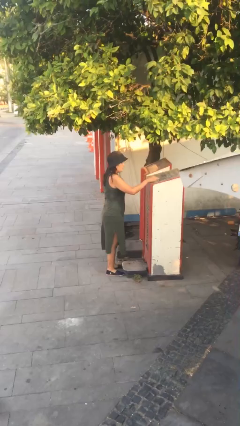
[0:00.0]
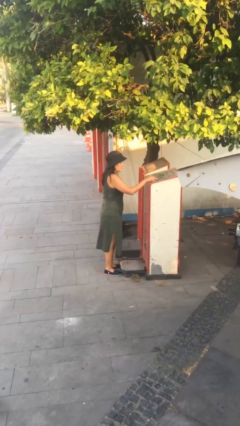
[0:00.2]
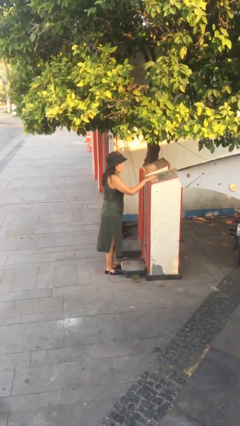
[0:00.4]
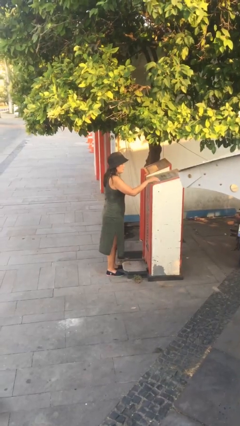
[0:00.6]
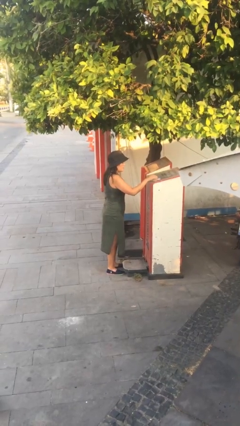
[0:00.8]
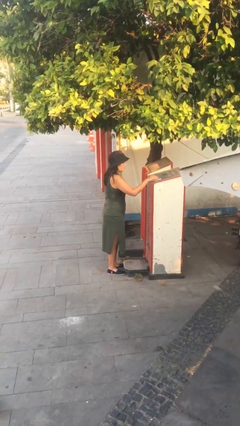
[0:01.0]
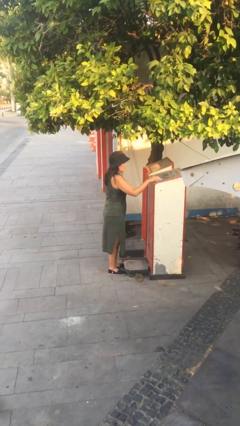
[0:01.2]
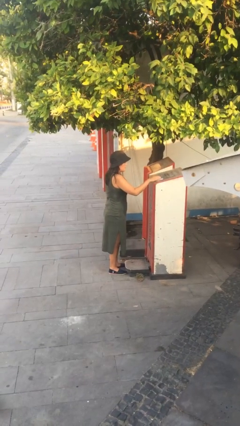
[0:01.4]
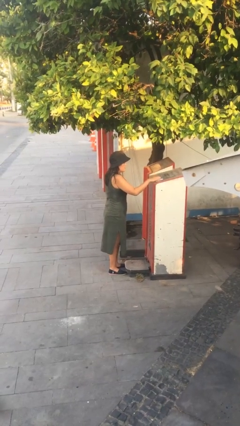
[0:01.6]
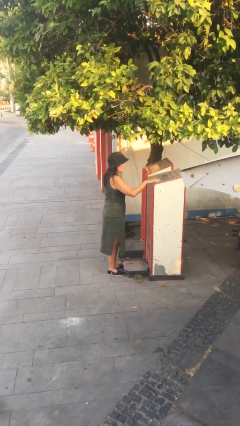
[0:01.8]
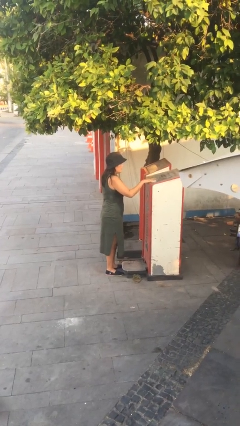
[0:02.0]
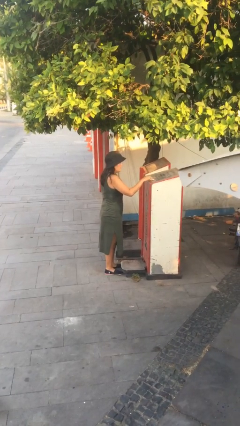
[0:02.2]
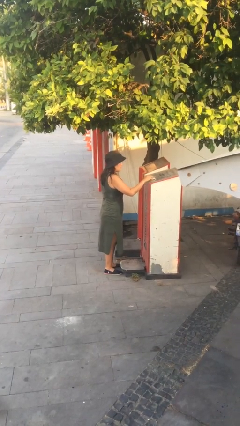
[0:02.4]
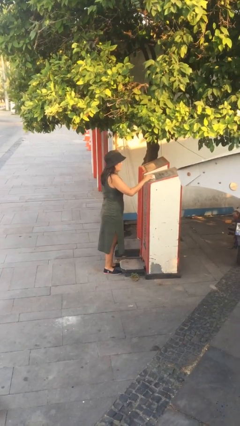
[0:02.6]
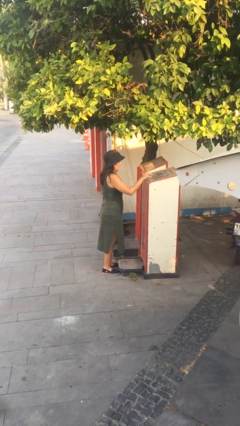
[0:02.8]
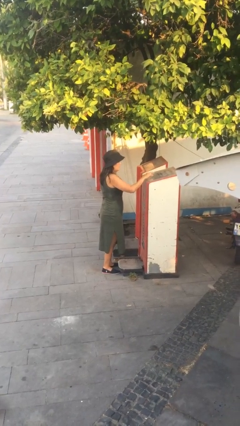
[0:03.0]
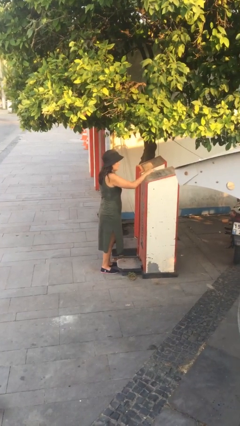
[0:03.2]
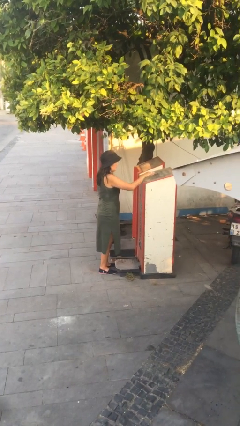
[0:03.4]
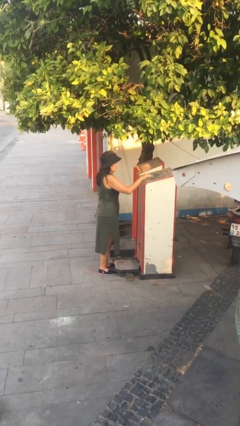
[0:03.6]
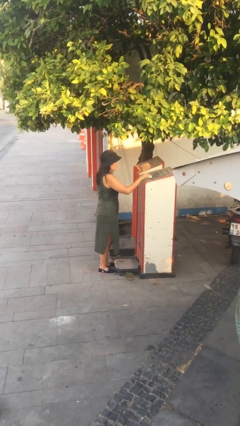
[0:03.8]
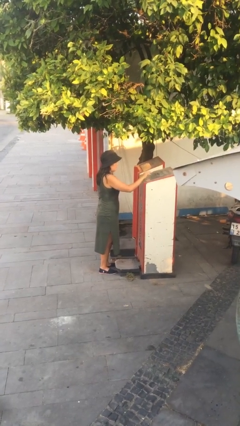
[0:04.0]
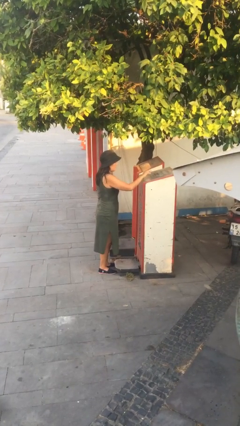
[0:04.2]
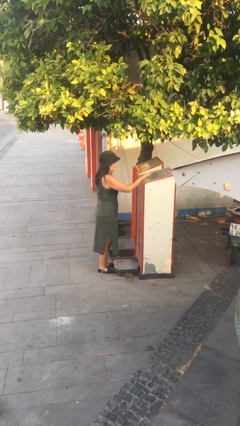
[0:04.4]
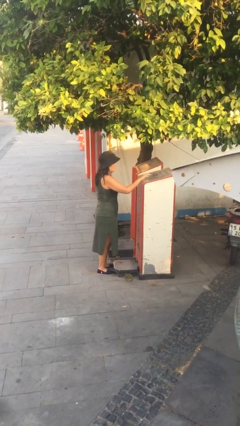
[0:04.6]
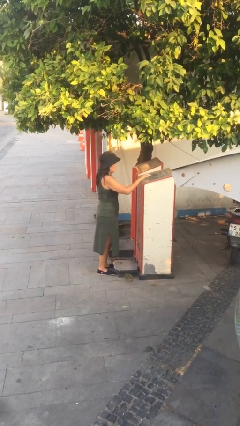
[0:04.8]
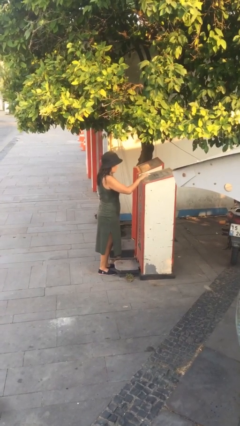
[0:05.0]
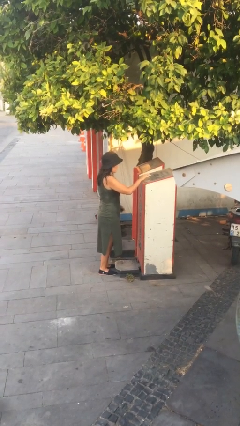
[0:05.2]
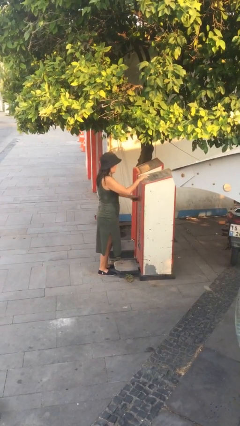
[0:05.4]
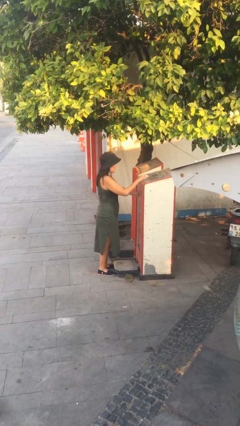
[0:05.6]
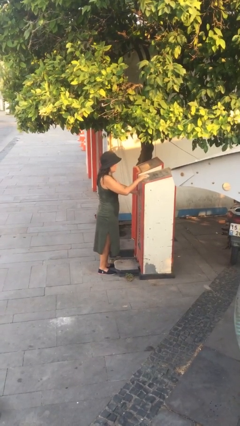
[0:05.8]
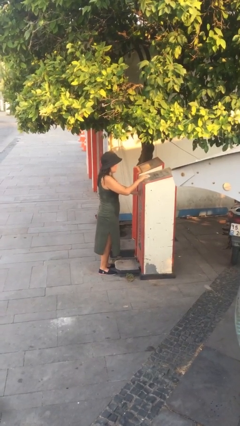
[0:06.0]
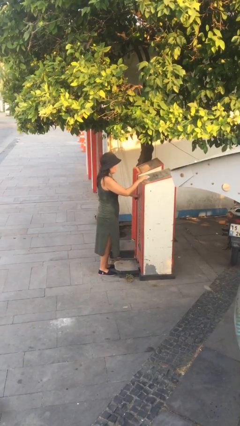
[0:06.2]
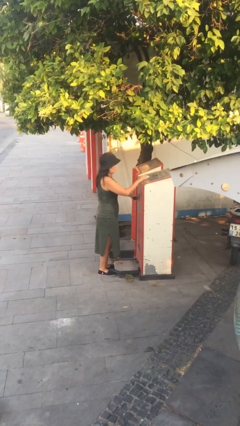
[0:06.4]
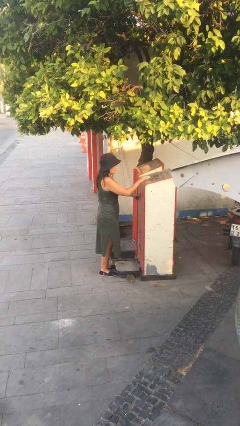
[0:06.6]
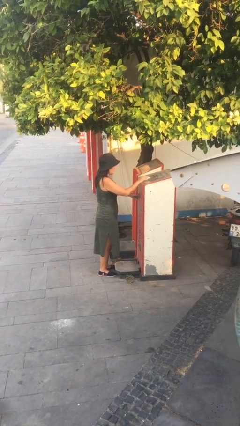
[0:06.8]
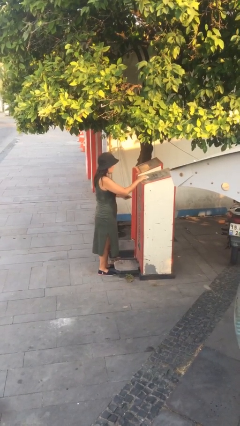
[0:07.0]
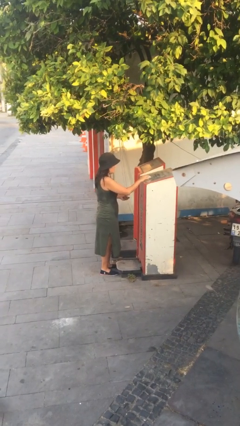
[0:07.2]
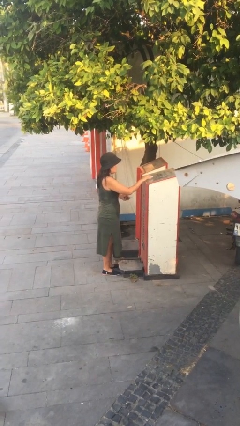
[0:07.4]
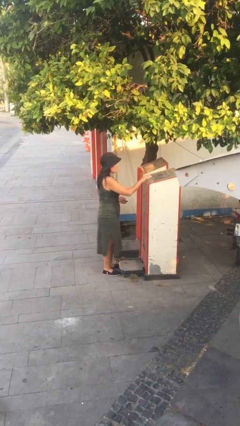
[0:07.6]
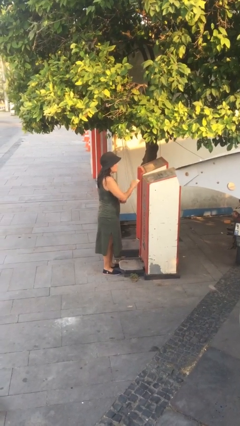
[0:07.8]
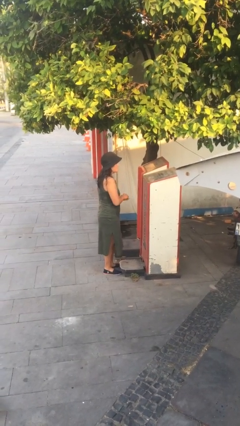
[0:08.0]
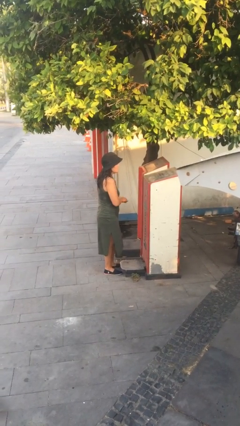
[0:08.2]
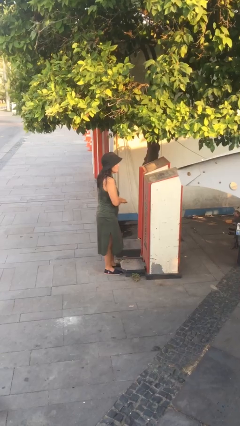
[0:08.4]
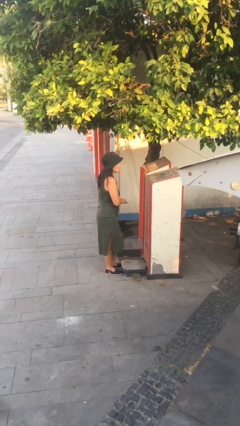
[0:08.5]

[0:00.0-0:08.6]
person purchases from machine

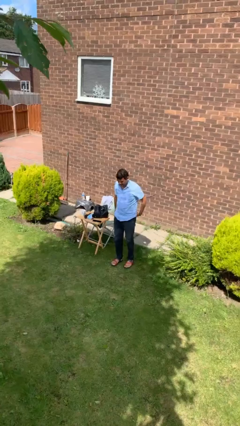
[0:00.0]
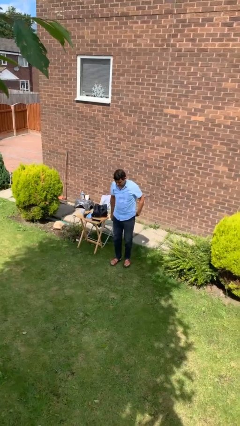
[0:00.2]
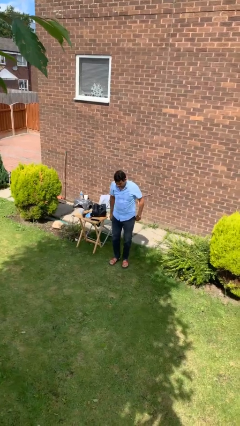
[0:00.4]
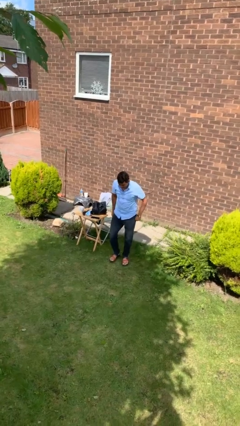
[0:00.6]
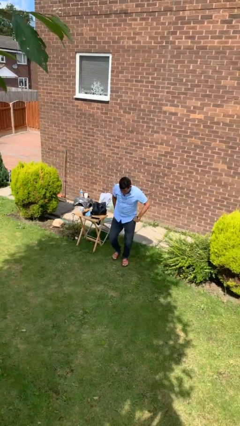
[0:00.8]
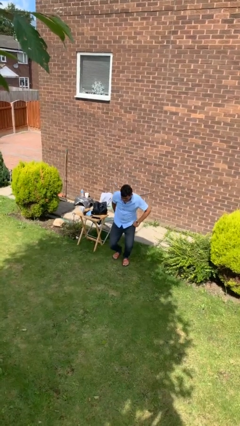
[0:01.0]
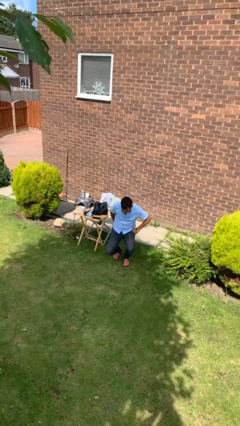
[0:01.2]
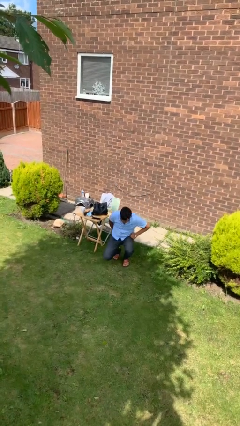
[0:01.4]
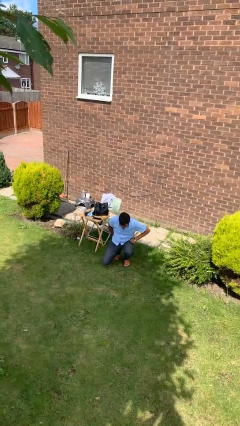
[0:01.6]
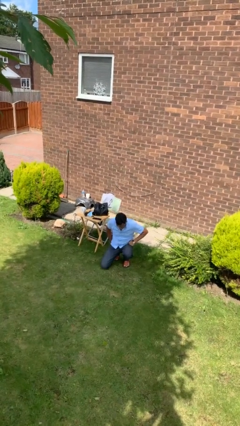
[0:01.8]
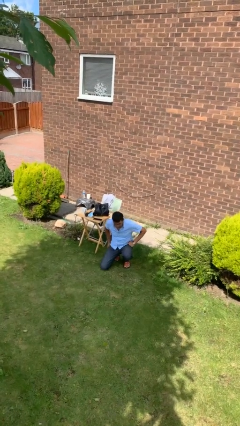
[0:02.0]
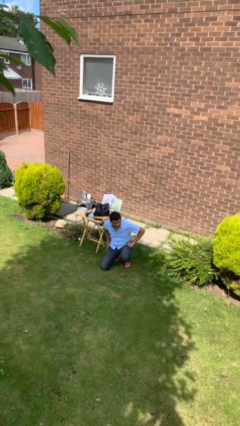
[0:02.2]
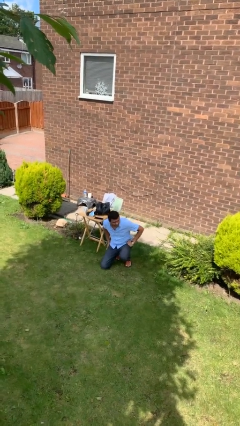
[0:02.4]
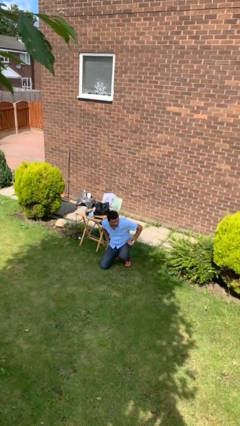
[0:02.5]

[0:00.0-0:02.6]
person kneels

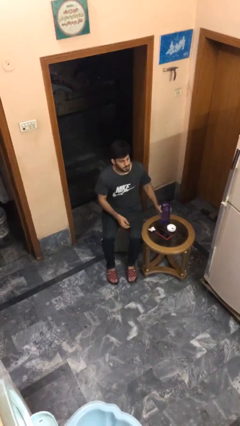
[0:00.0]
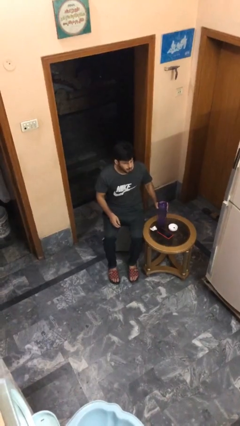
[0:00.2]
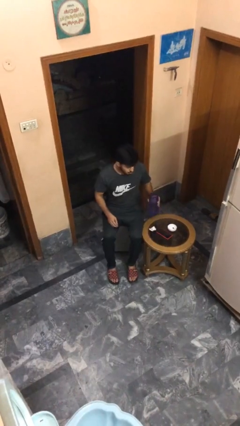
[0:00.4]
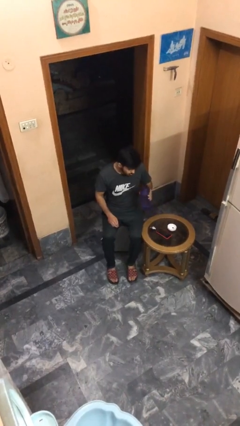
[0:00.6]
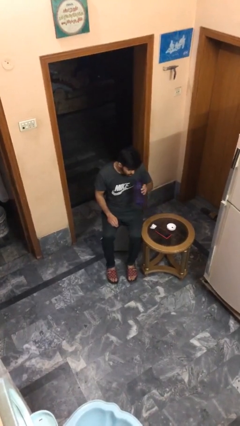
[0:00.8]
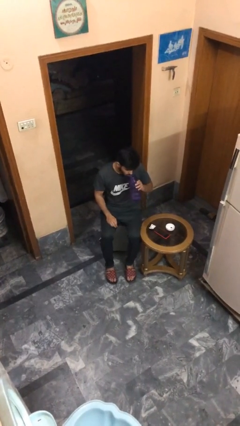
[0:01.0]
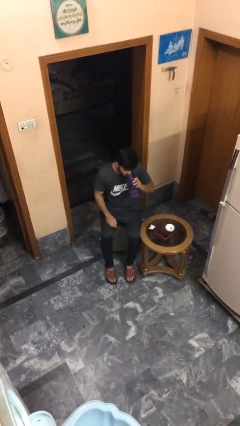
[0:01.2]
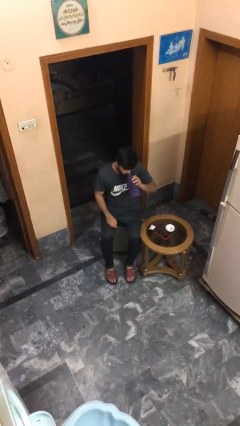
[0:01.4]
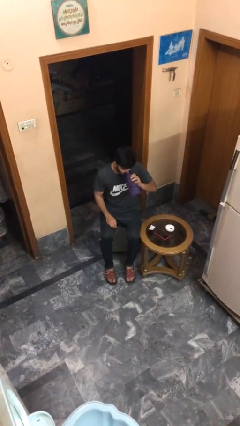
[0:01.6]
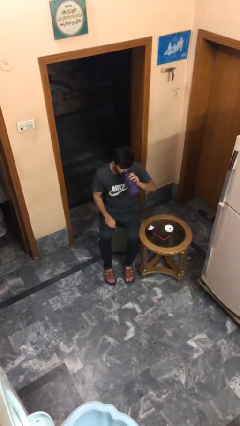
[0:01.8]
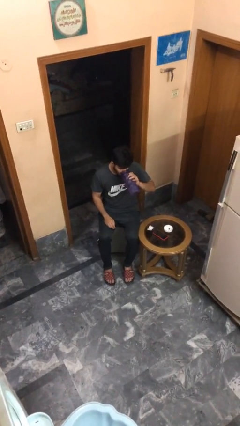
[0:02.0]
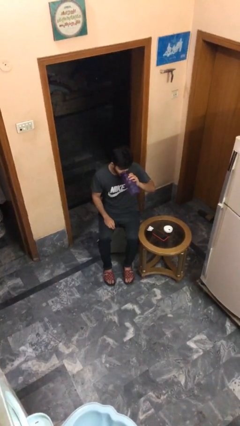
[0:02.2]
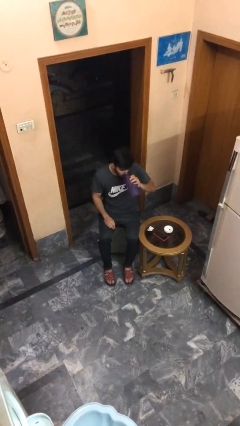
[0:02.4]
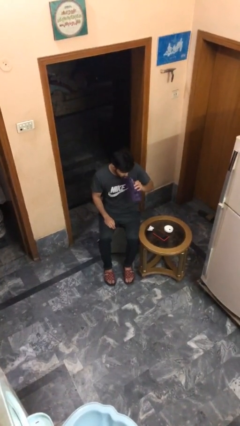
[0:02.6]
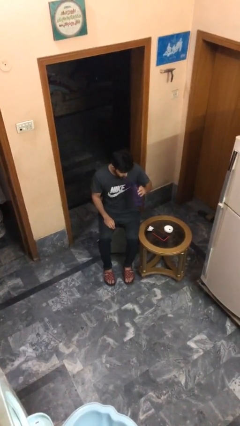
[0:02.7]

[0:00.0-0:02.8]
person drinks from cup

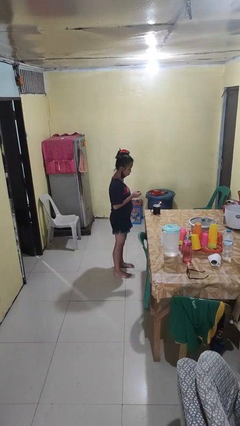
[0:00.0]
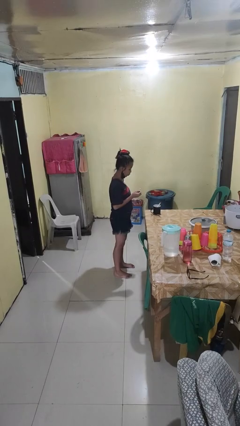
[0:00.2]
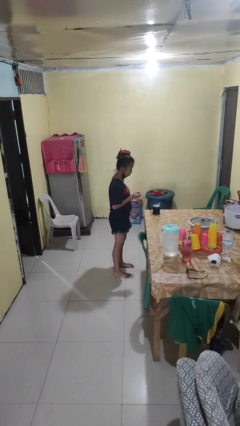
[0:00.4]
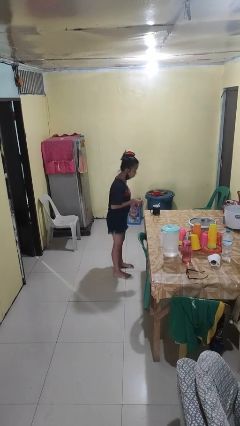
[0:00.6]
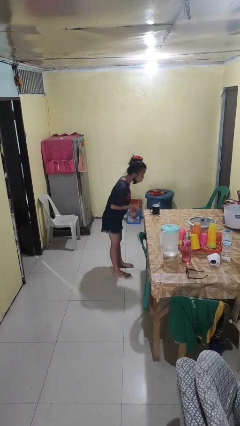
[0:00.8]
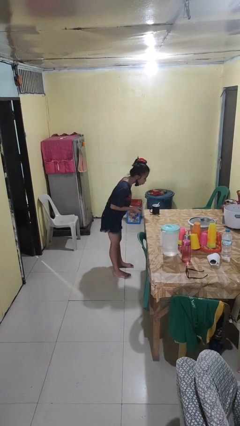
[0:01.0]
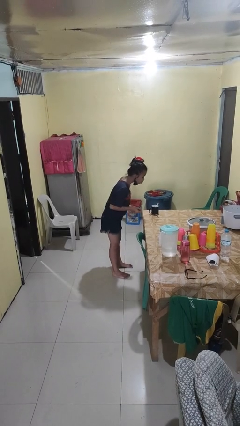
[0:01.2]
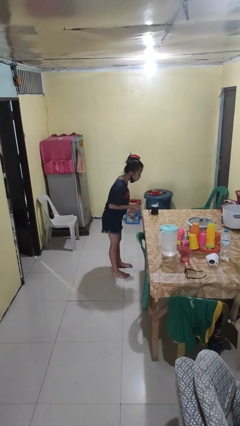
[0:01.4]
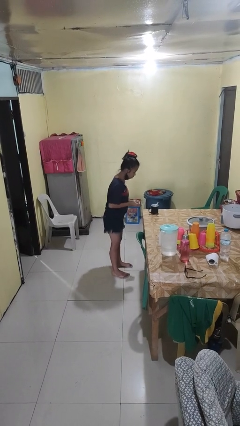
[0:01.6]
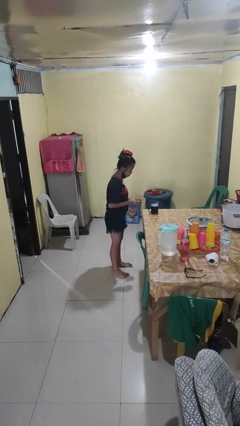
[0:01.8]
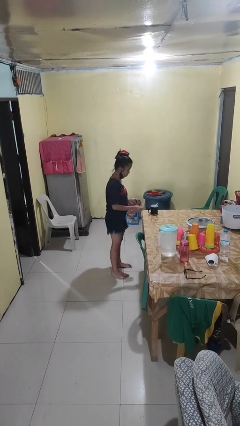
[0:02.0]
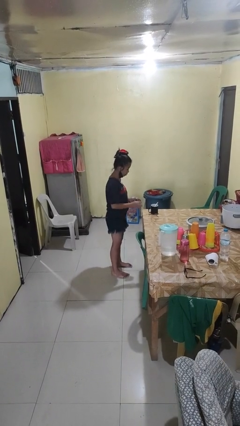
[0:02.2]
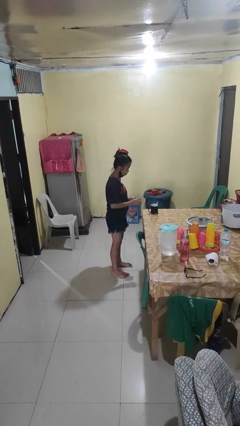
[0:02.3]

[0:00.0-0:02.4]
person extinguishes candle

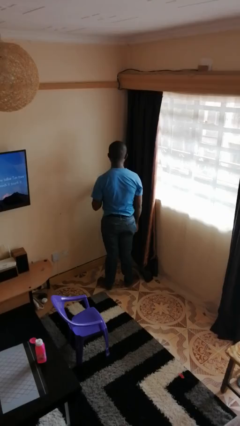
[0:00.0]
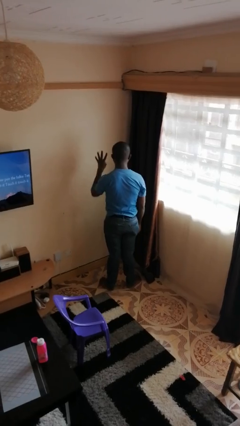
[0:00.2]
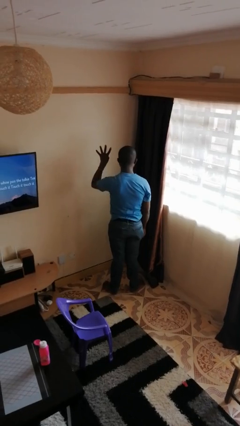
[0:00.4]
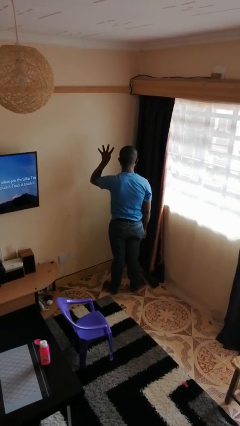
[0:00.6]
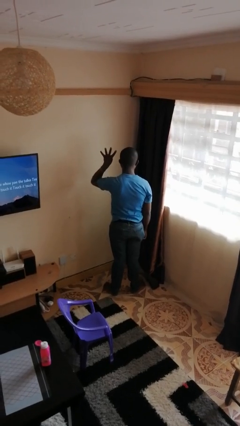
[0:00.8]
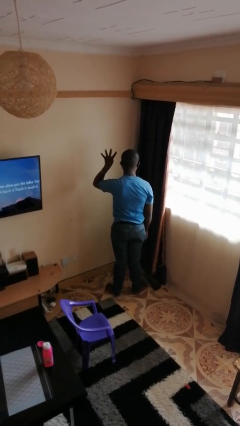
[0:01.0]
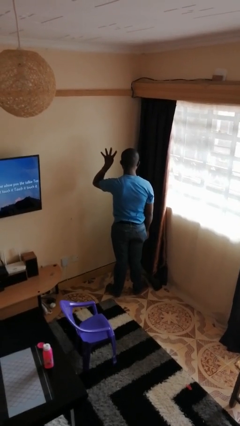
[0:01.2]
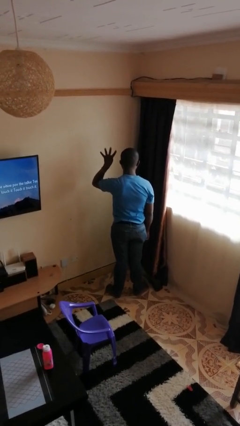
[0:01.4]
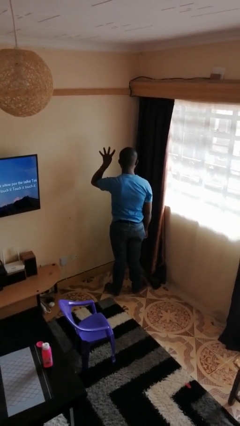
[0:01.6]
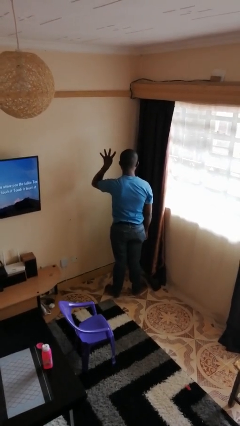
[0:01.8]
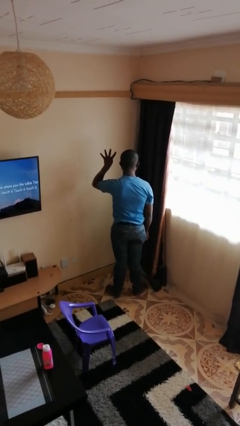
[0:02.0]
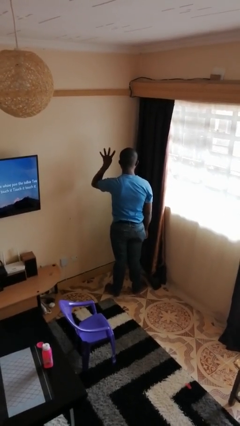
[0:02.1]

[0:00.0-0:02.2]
person gestures number four
